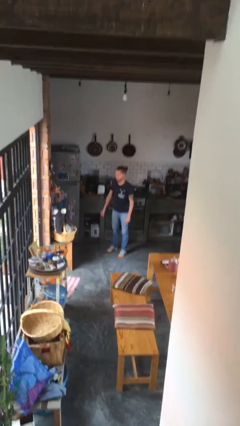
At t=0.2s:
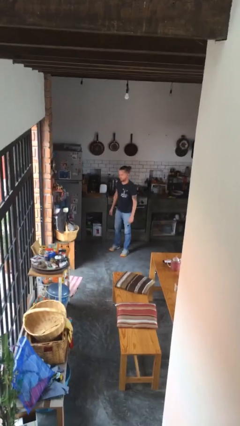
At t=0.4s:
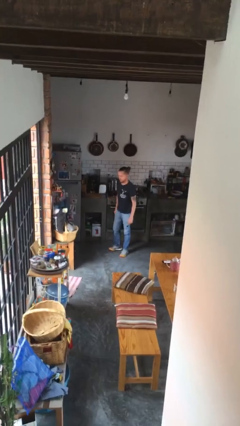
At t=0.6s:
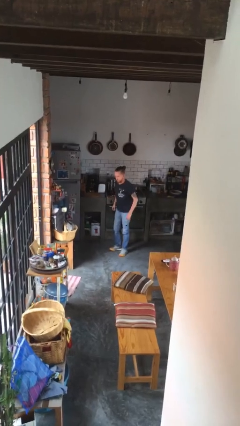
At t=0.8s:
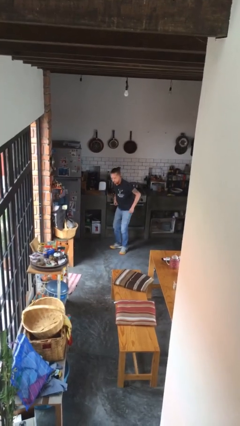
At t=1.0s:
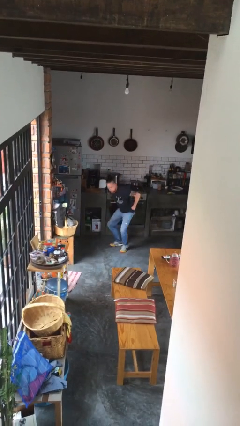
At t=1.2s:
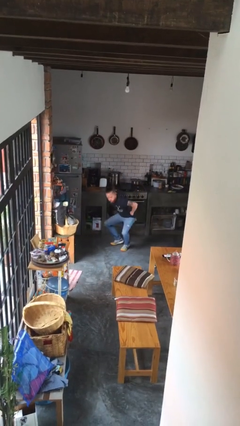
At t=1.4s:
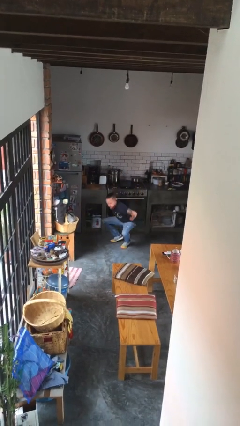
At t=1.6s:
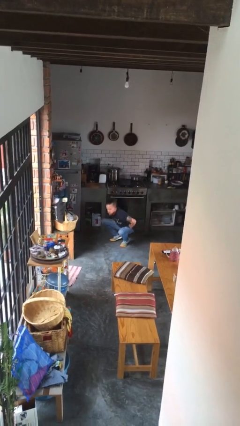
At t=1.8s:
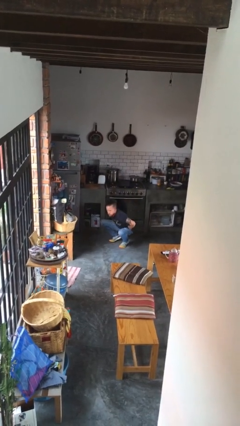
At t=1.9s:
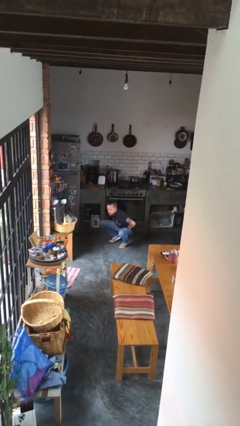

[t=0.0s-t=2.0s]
person squats

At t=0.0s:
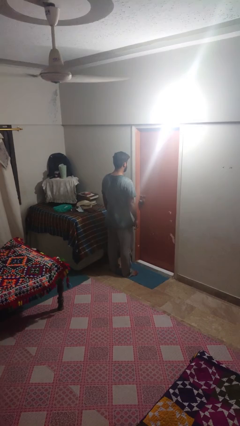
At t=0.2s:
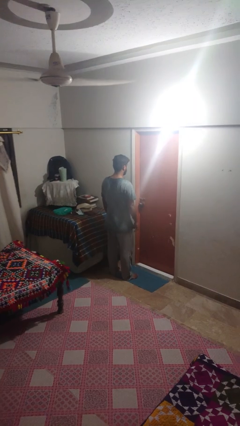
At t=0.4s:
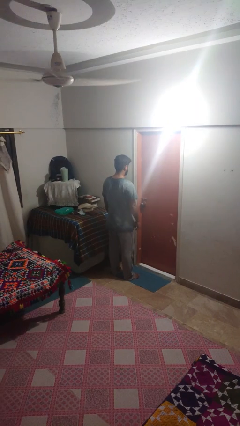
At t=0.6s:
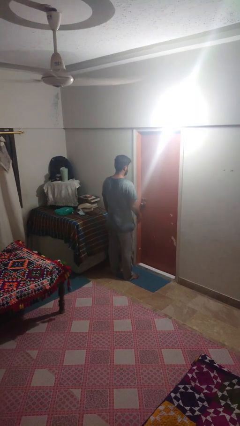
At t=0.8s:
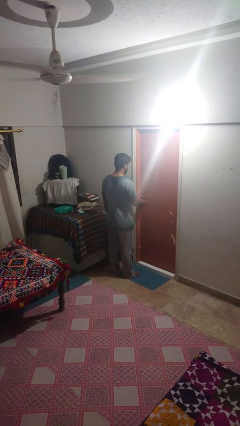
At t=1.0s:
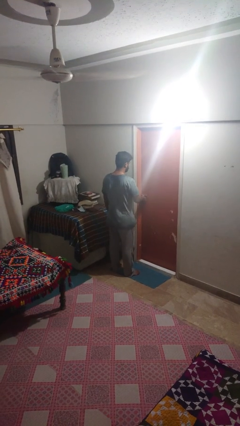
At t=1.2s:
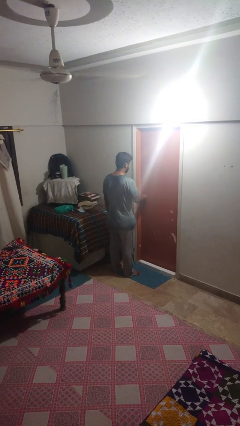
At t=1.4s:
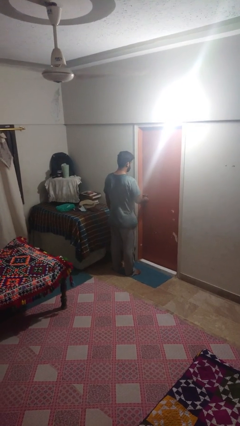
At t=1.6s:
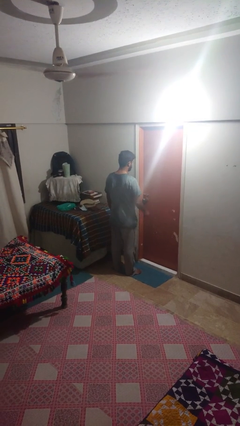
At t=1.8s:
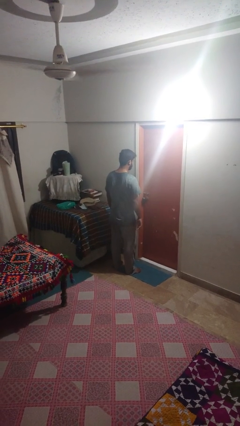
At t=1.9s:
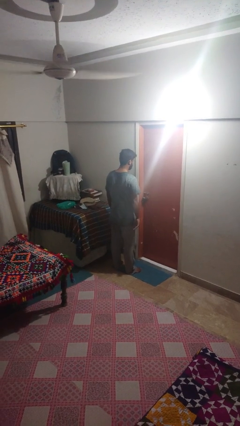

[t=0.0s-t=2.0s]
person unlocks door with keys

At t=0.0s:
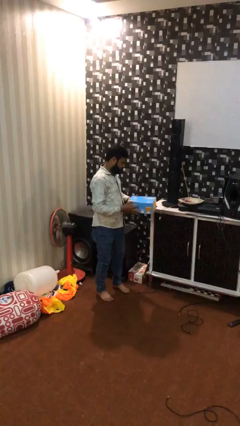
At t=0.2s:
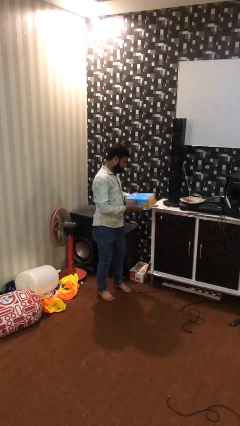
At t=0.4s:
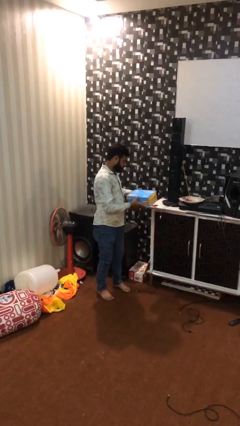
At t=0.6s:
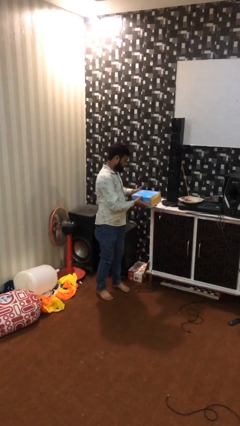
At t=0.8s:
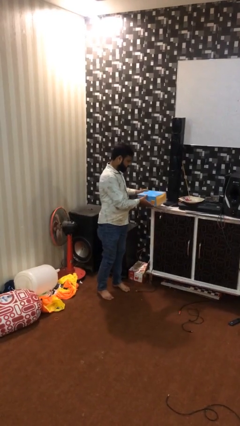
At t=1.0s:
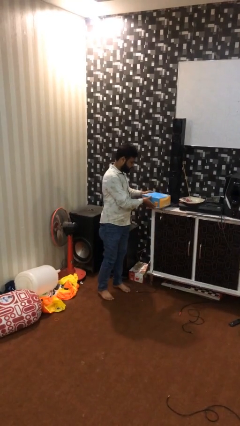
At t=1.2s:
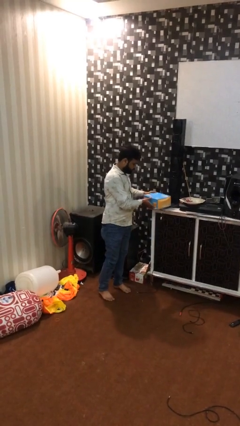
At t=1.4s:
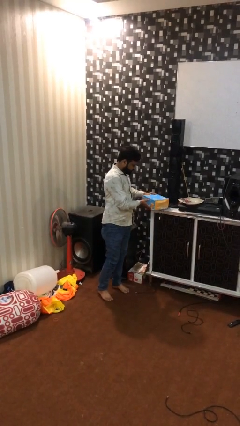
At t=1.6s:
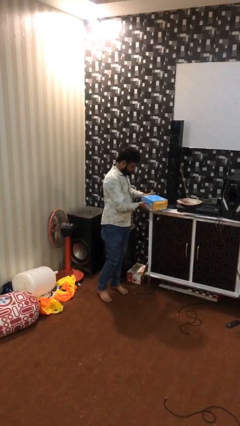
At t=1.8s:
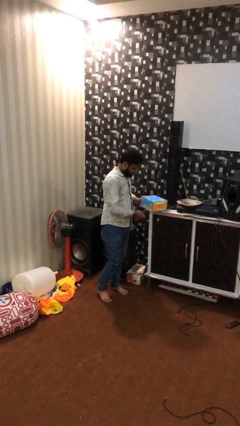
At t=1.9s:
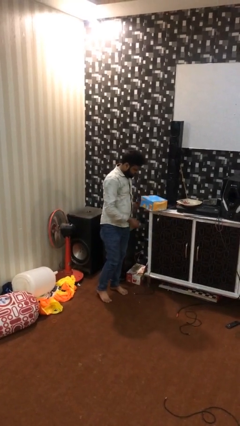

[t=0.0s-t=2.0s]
person puts down object on table

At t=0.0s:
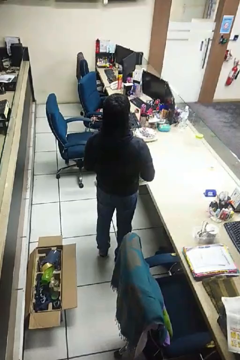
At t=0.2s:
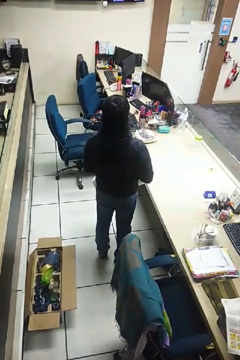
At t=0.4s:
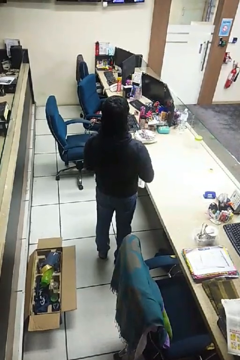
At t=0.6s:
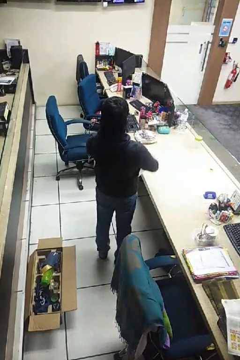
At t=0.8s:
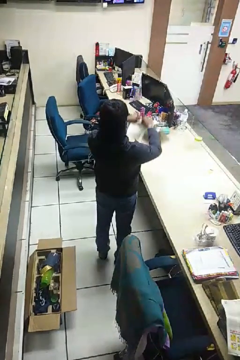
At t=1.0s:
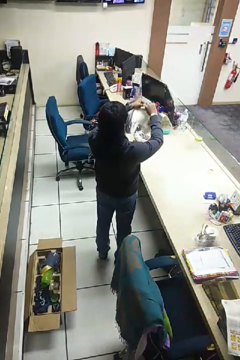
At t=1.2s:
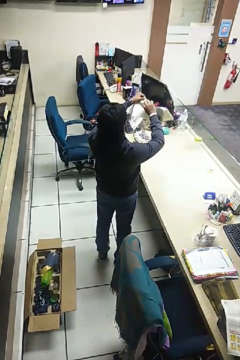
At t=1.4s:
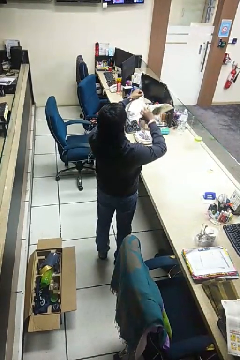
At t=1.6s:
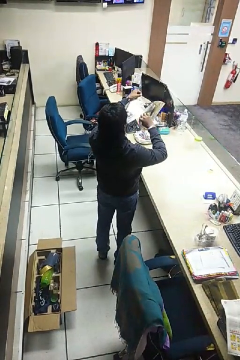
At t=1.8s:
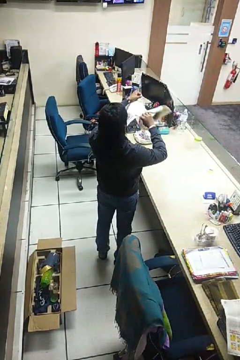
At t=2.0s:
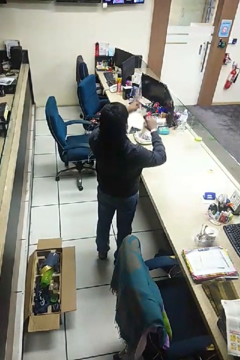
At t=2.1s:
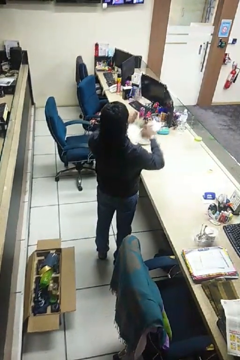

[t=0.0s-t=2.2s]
person tears paper

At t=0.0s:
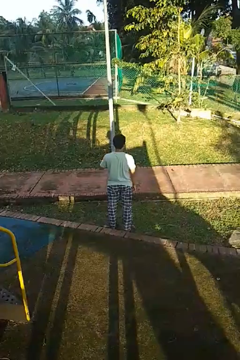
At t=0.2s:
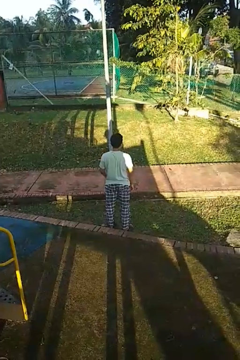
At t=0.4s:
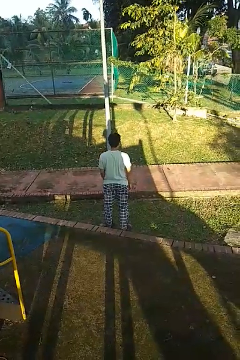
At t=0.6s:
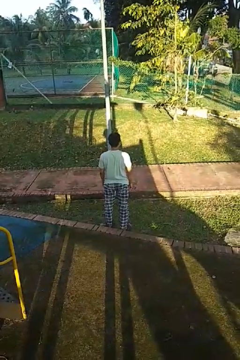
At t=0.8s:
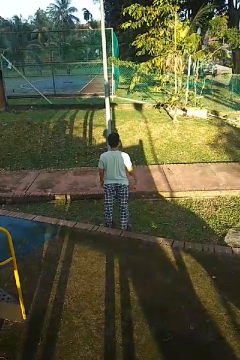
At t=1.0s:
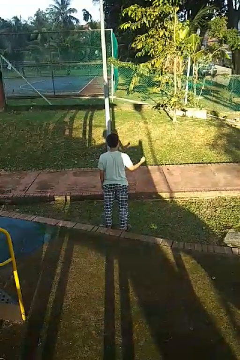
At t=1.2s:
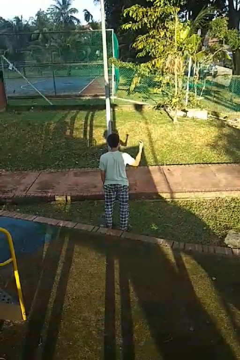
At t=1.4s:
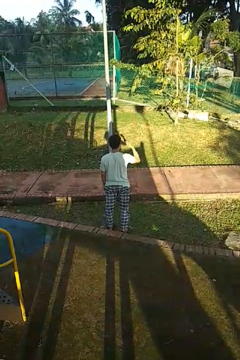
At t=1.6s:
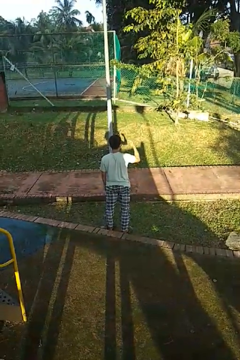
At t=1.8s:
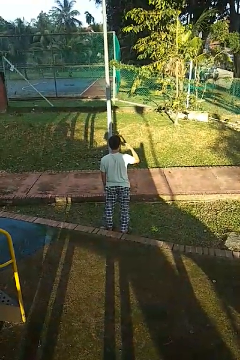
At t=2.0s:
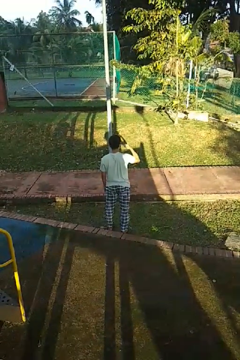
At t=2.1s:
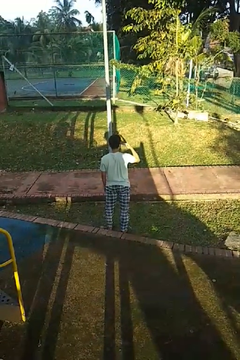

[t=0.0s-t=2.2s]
person gestures listen closely

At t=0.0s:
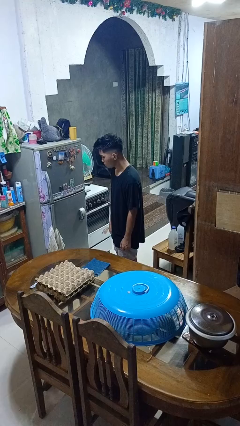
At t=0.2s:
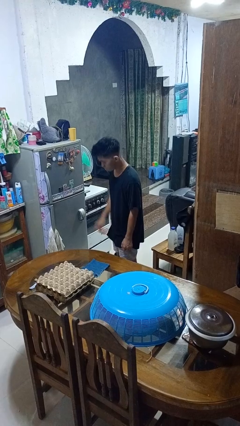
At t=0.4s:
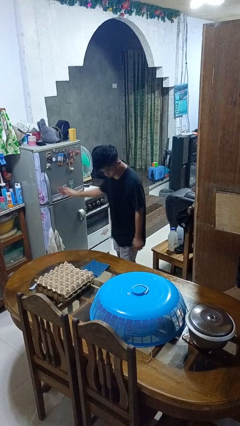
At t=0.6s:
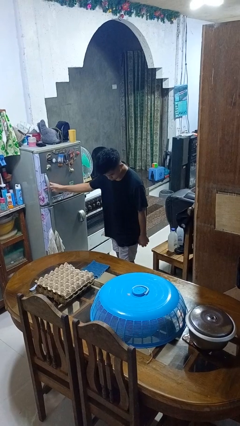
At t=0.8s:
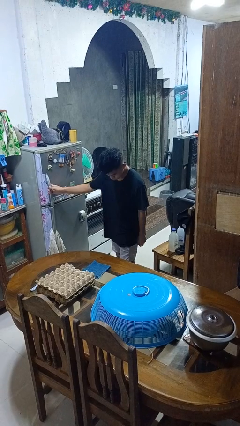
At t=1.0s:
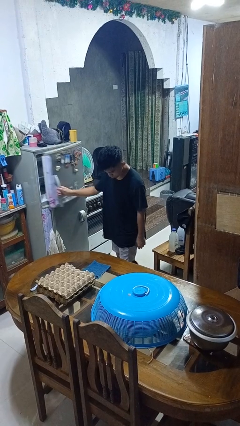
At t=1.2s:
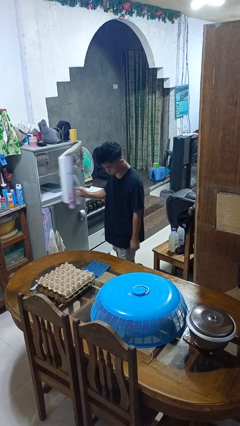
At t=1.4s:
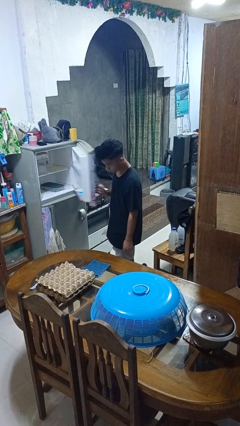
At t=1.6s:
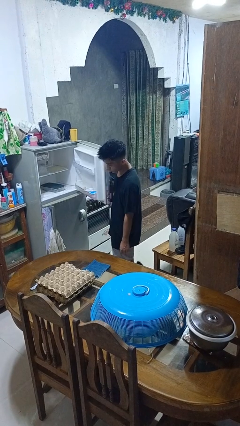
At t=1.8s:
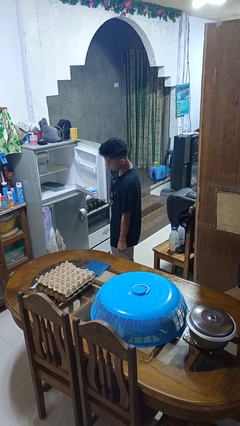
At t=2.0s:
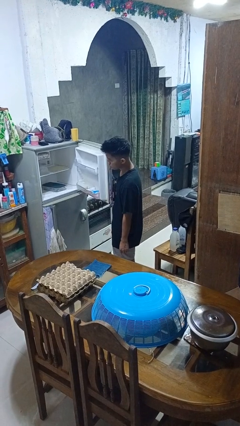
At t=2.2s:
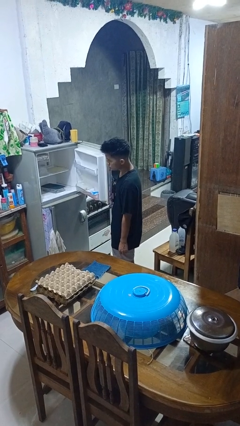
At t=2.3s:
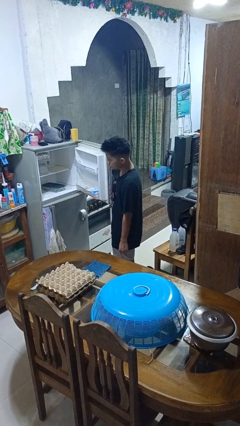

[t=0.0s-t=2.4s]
person opens refrigerator

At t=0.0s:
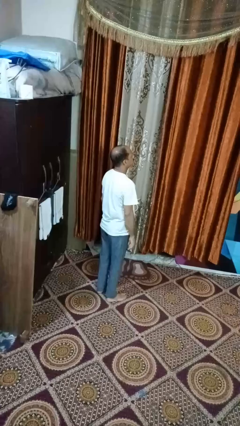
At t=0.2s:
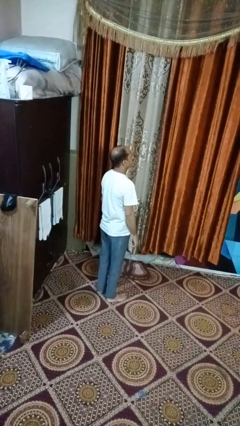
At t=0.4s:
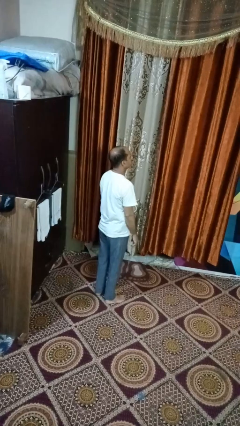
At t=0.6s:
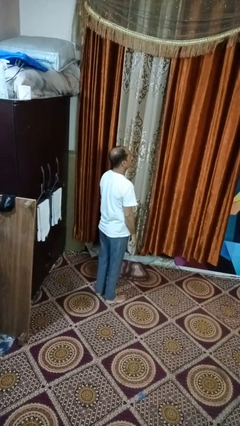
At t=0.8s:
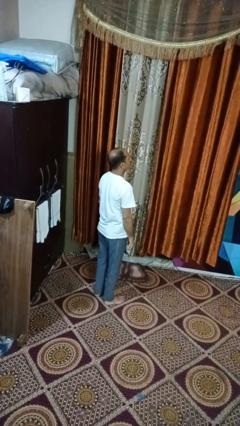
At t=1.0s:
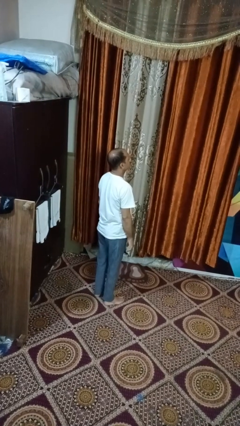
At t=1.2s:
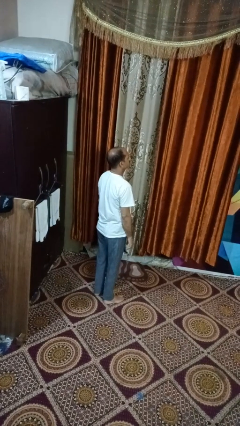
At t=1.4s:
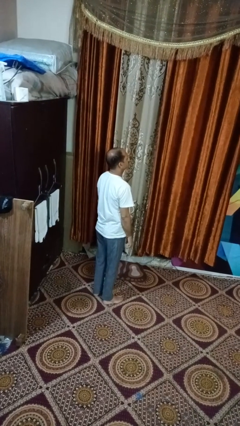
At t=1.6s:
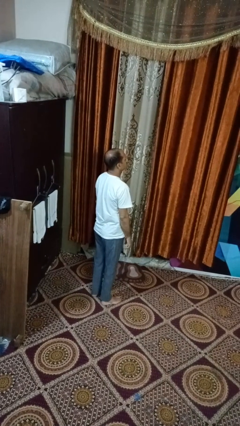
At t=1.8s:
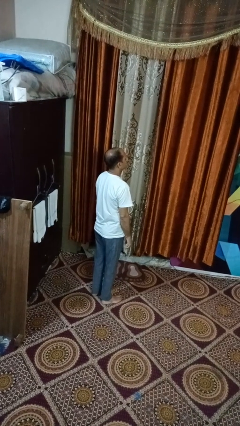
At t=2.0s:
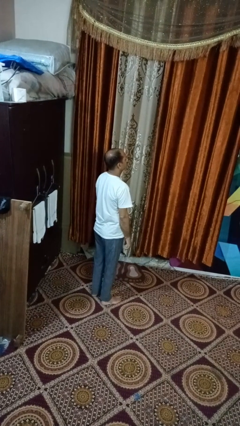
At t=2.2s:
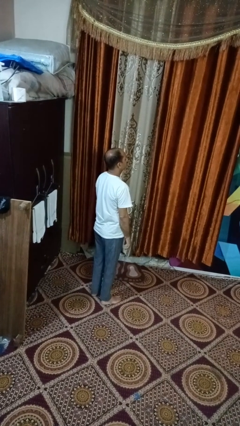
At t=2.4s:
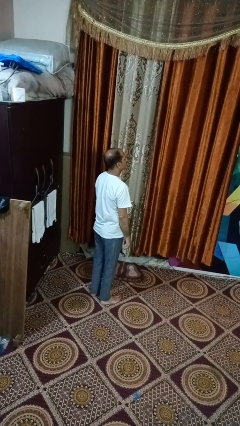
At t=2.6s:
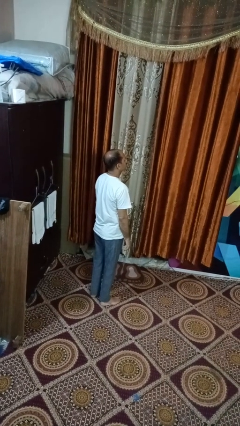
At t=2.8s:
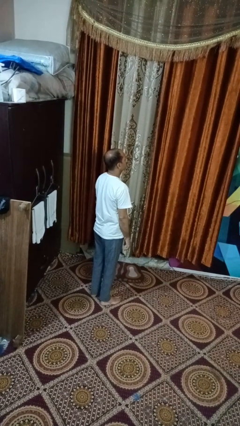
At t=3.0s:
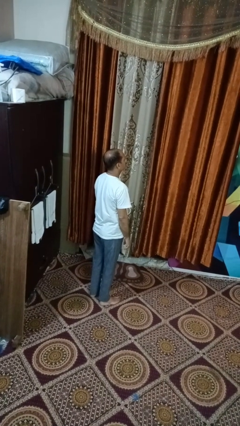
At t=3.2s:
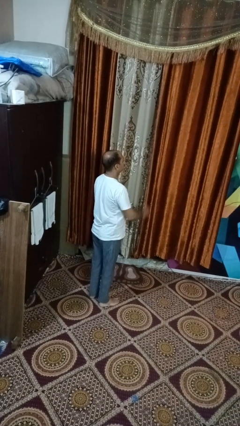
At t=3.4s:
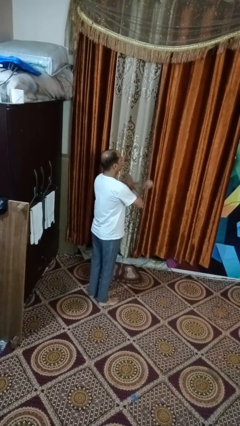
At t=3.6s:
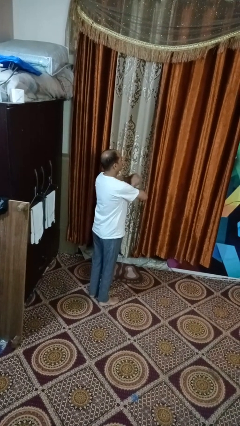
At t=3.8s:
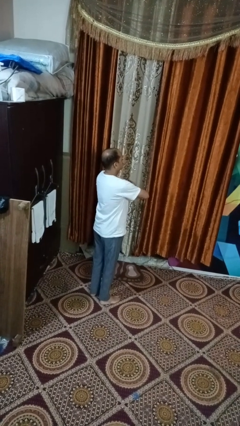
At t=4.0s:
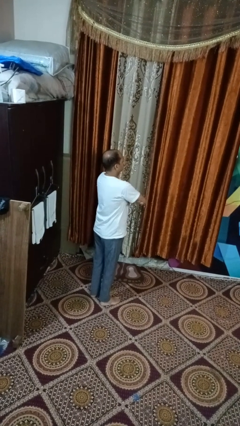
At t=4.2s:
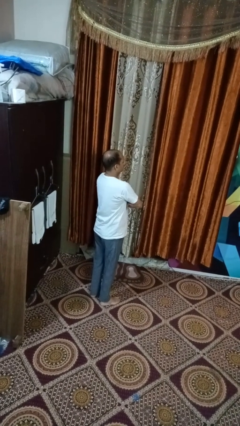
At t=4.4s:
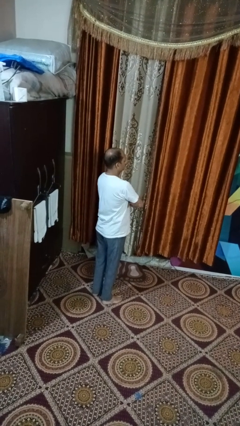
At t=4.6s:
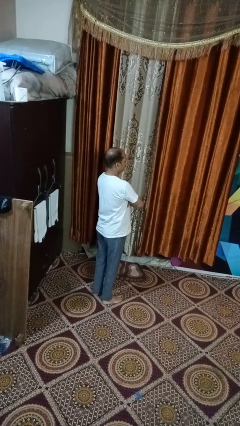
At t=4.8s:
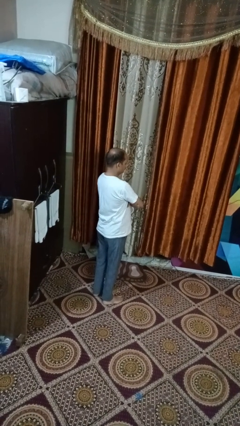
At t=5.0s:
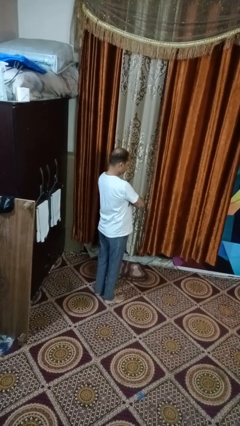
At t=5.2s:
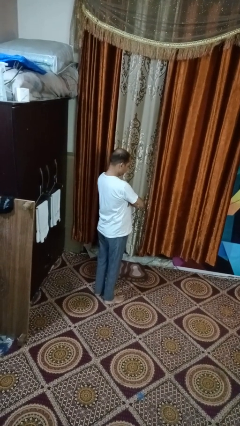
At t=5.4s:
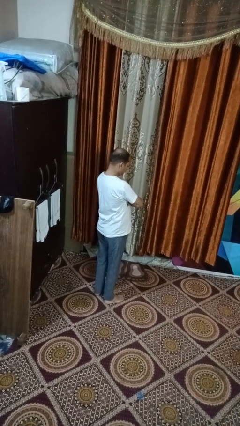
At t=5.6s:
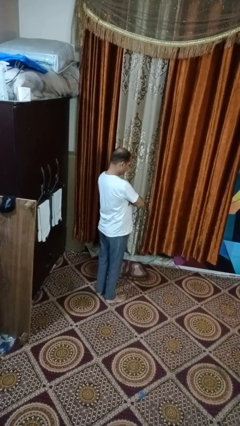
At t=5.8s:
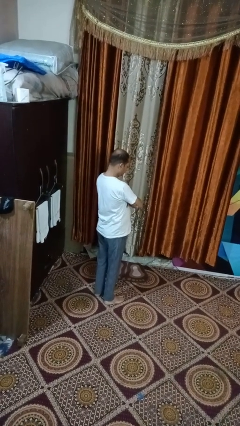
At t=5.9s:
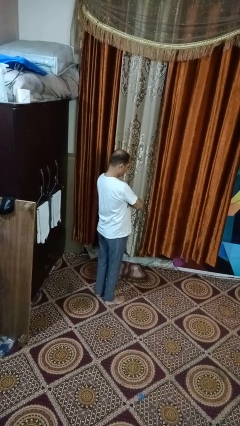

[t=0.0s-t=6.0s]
person crosses arms
